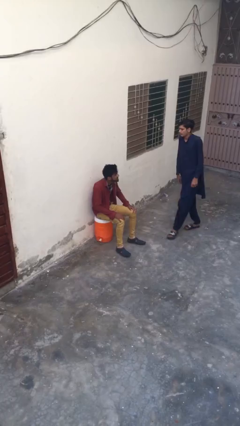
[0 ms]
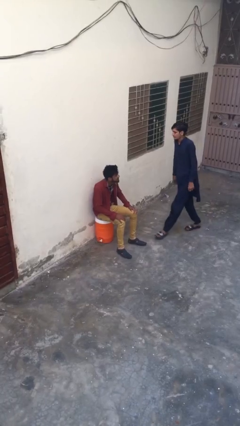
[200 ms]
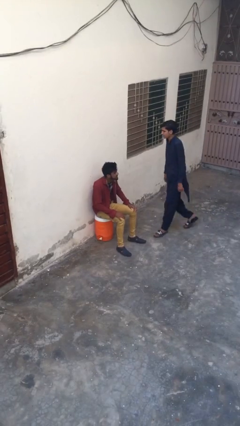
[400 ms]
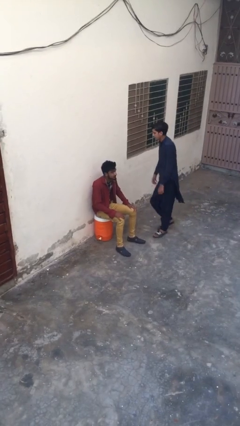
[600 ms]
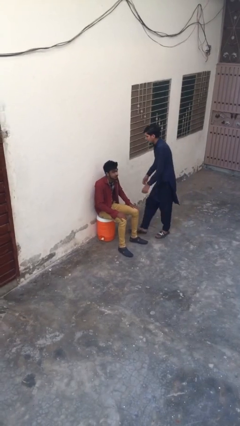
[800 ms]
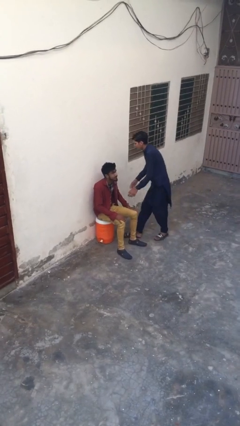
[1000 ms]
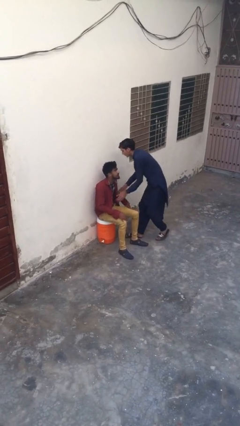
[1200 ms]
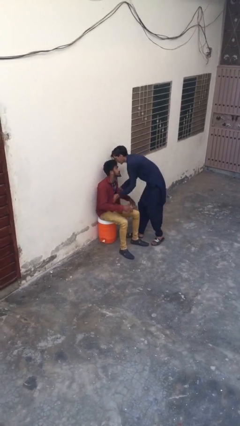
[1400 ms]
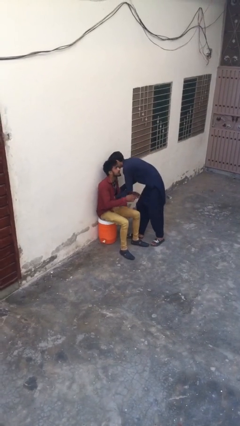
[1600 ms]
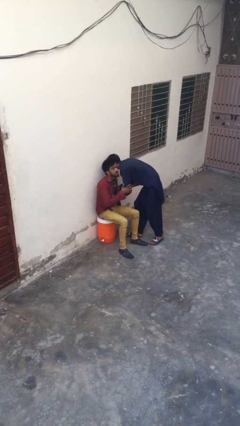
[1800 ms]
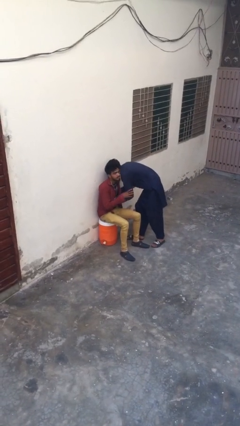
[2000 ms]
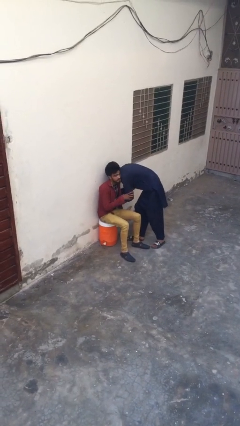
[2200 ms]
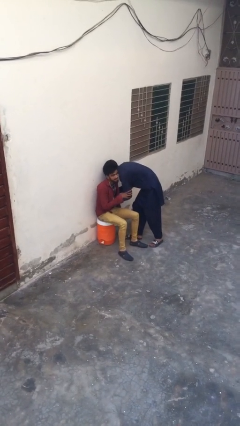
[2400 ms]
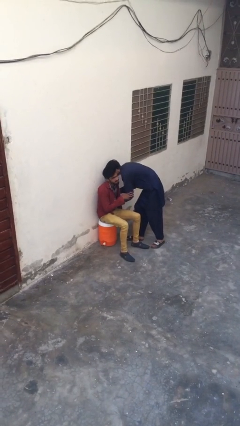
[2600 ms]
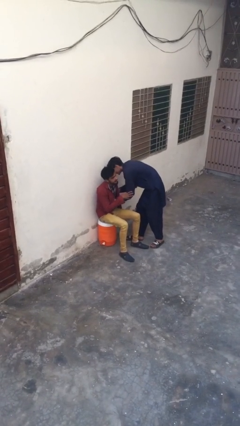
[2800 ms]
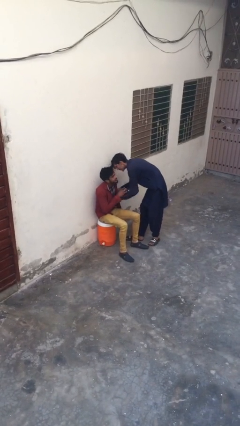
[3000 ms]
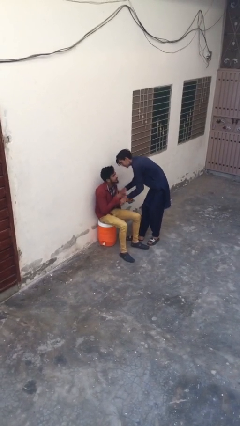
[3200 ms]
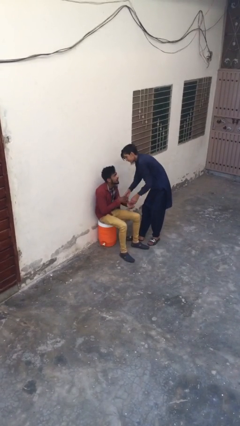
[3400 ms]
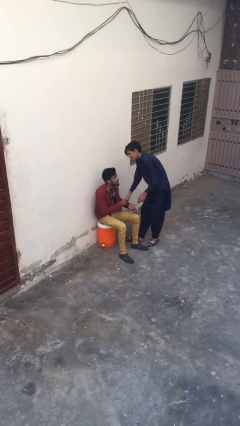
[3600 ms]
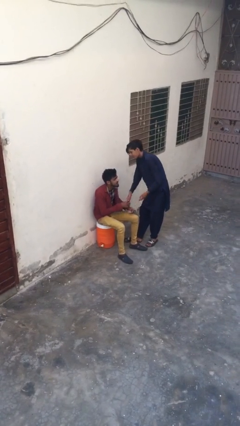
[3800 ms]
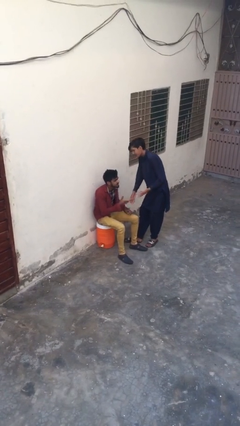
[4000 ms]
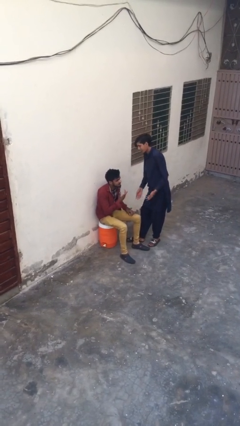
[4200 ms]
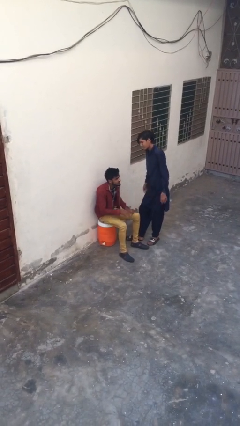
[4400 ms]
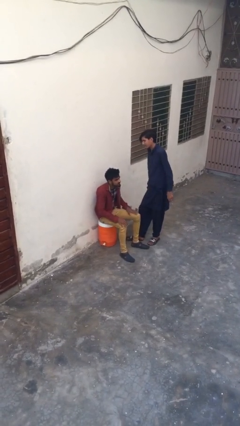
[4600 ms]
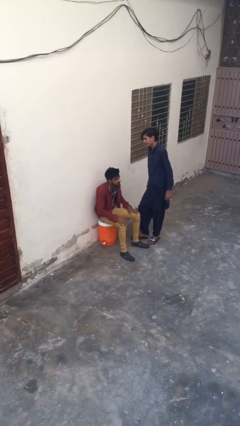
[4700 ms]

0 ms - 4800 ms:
person embraces person

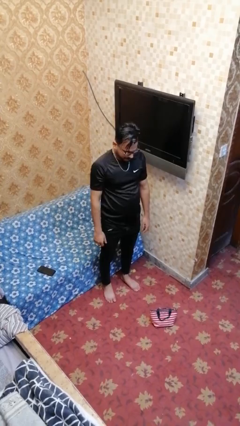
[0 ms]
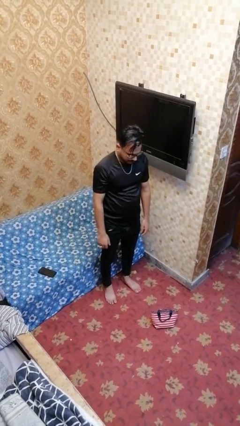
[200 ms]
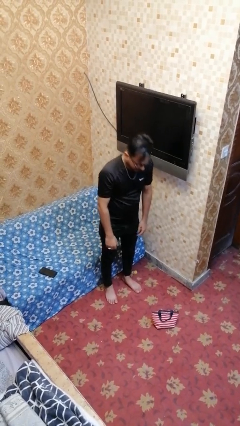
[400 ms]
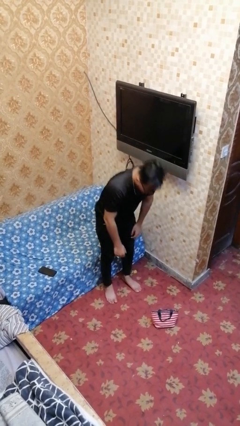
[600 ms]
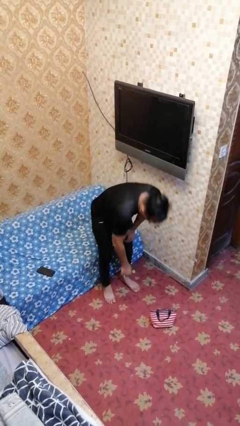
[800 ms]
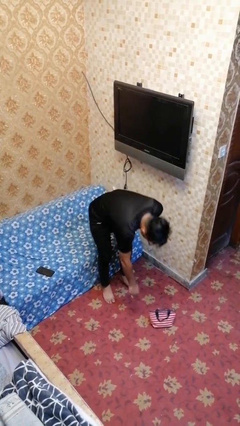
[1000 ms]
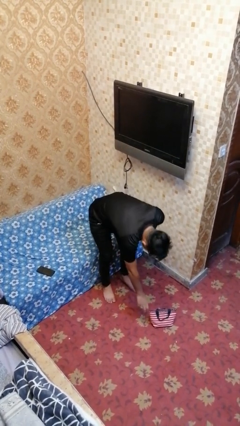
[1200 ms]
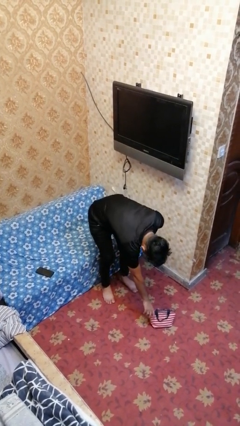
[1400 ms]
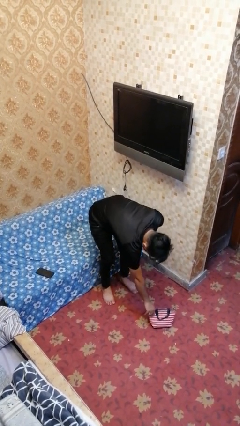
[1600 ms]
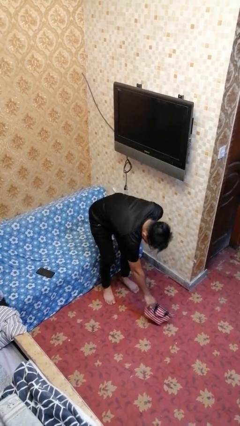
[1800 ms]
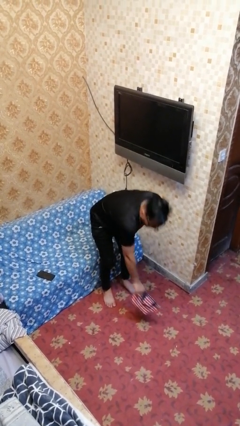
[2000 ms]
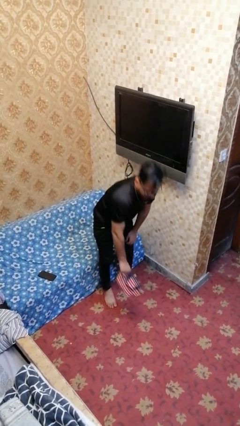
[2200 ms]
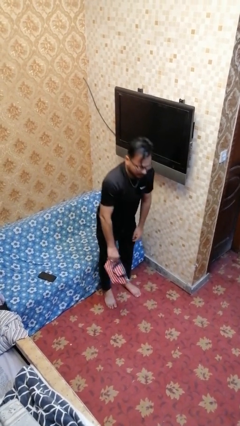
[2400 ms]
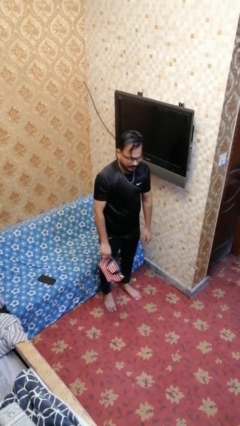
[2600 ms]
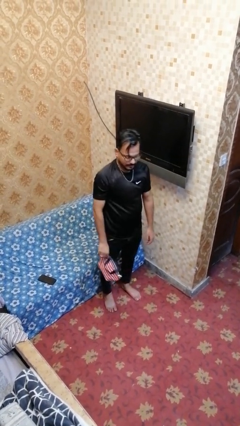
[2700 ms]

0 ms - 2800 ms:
person picks up object from floor

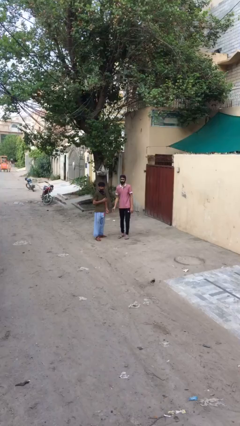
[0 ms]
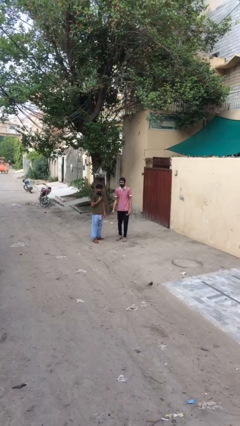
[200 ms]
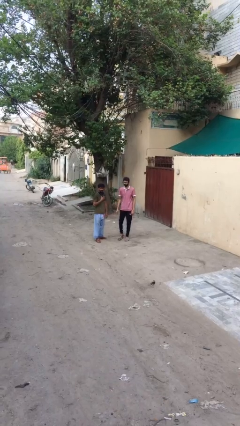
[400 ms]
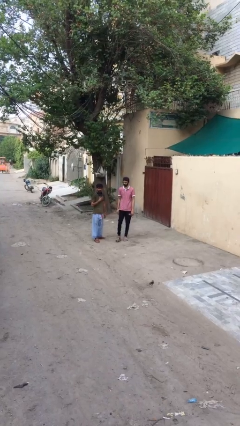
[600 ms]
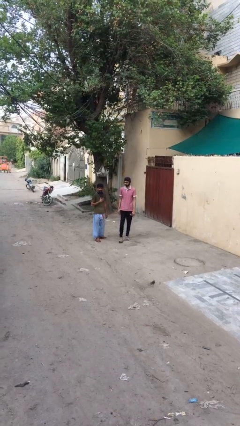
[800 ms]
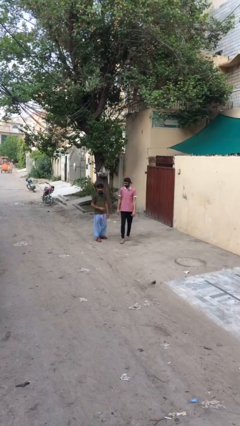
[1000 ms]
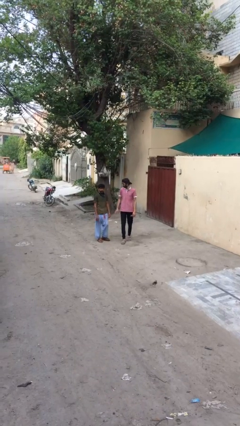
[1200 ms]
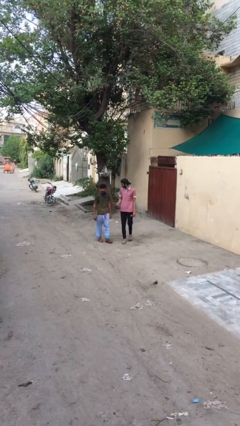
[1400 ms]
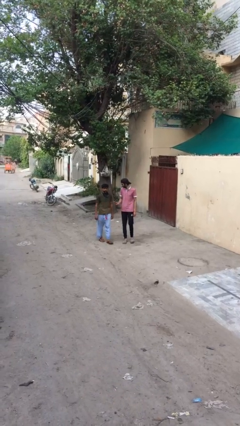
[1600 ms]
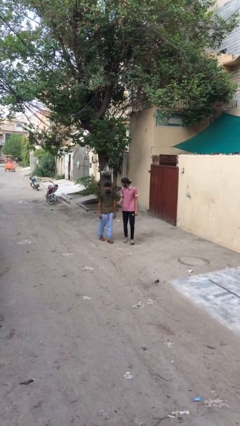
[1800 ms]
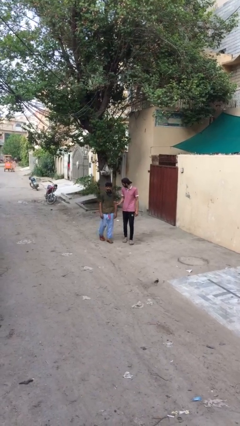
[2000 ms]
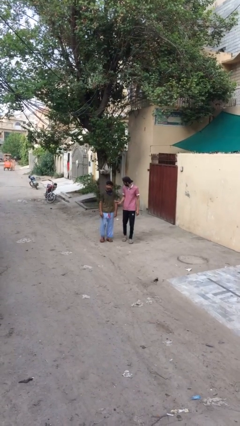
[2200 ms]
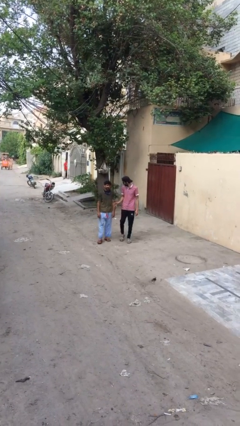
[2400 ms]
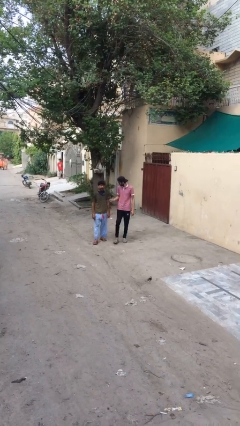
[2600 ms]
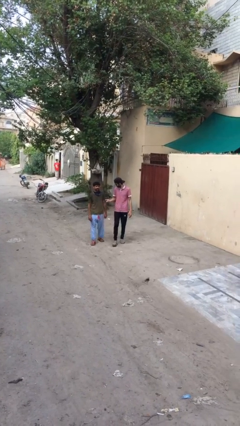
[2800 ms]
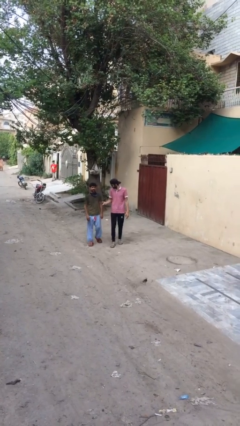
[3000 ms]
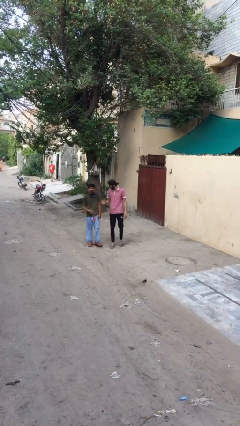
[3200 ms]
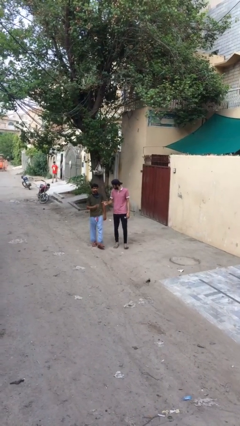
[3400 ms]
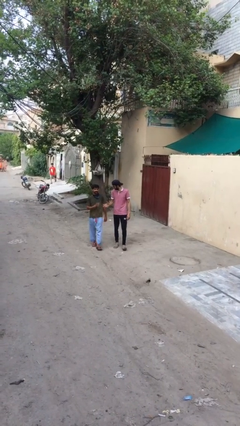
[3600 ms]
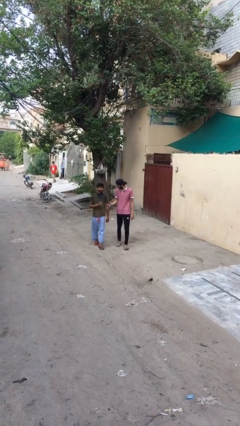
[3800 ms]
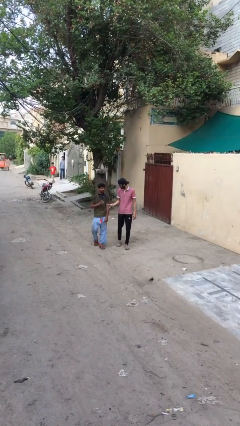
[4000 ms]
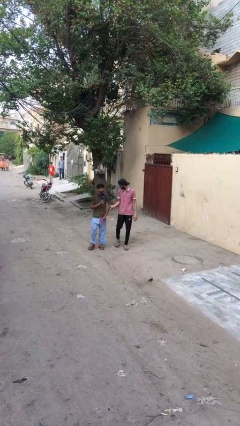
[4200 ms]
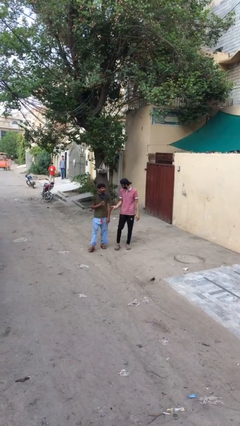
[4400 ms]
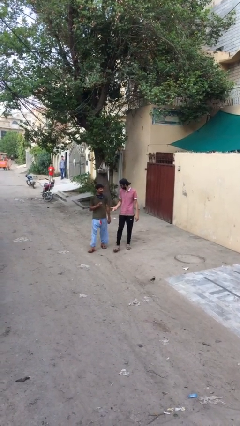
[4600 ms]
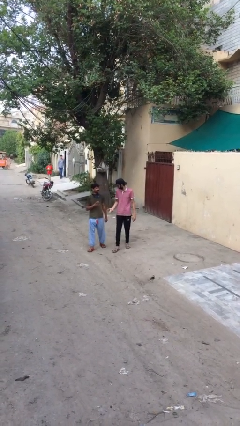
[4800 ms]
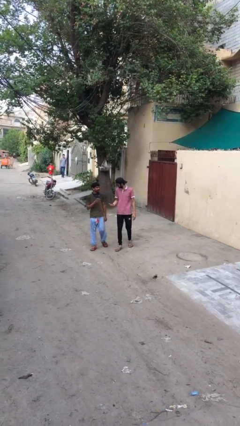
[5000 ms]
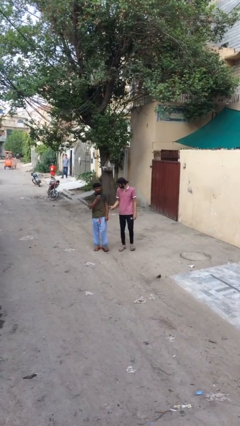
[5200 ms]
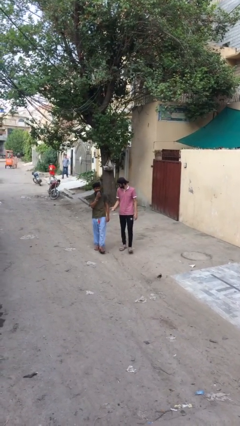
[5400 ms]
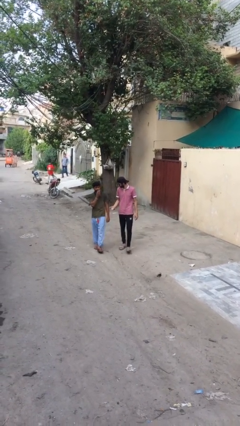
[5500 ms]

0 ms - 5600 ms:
person talks to person

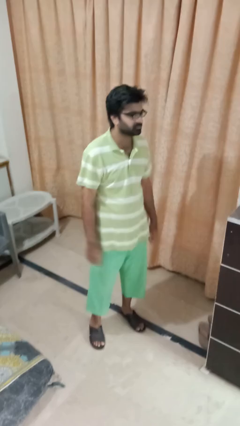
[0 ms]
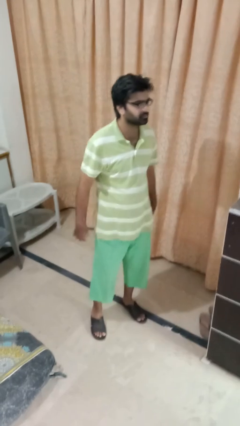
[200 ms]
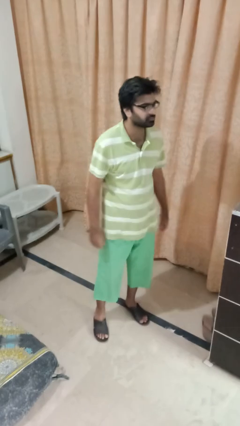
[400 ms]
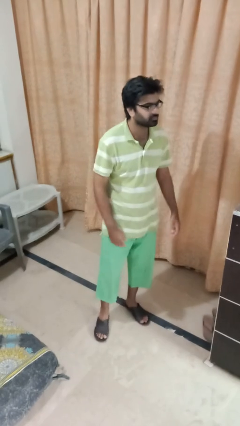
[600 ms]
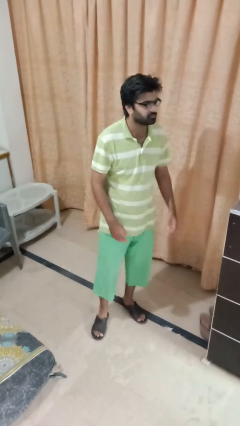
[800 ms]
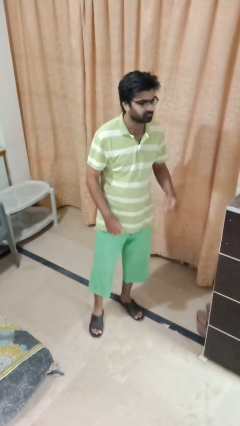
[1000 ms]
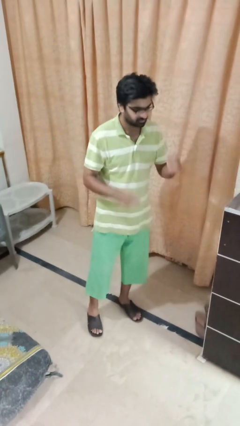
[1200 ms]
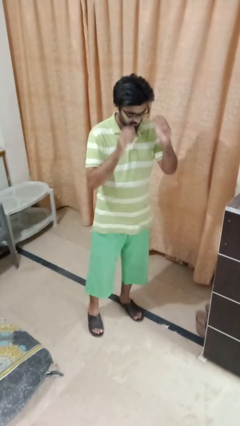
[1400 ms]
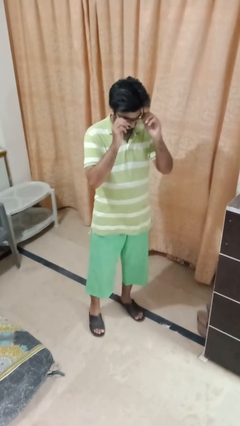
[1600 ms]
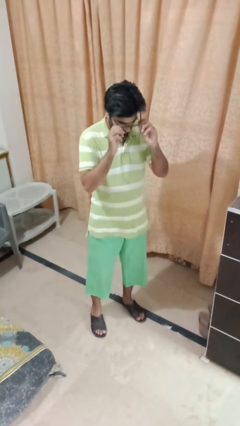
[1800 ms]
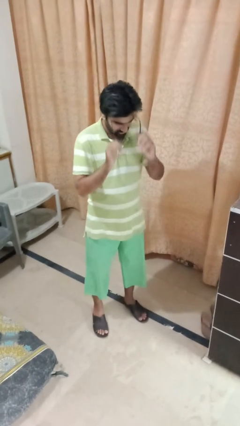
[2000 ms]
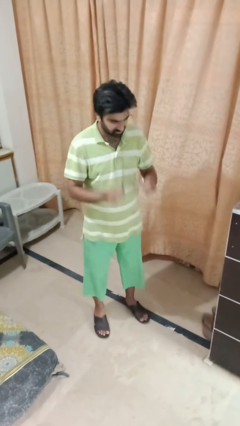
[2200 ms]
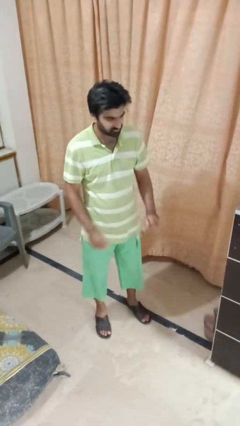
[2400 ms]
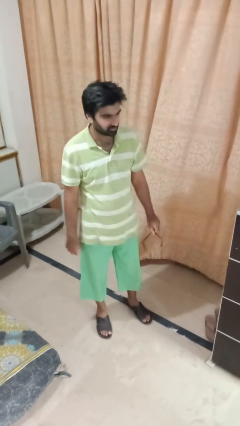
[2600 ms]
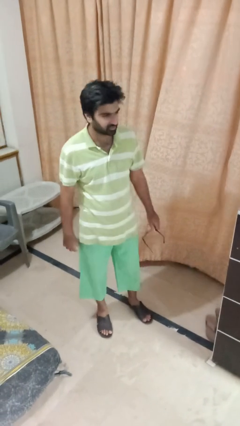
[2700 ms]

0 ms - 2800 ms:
person takes off glasses

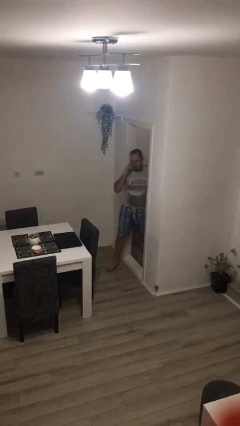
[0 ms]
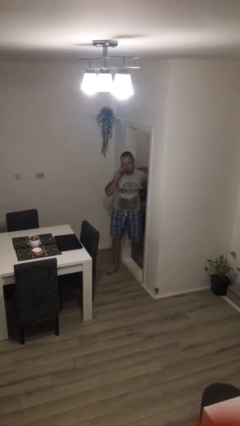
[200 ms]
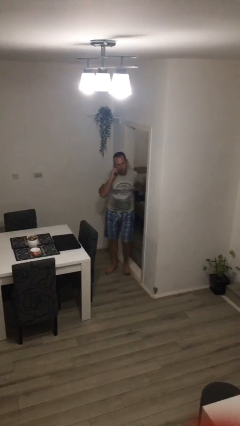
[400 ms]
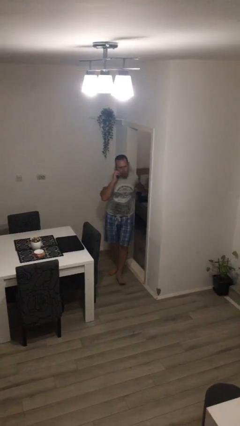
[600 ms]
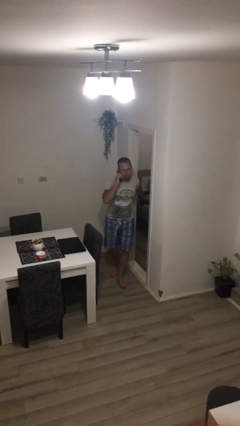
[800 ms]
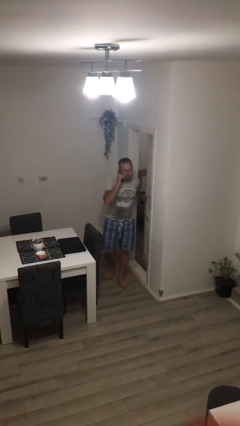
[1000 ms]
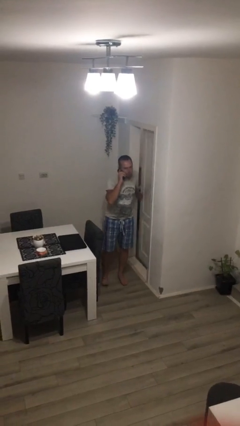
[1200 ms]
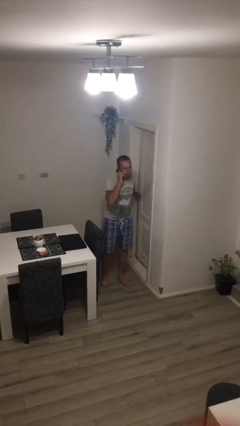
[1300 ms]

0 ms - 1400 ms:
person enters scene through structure

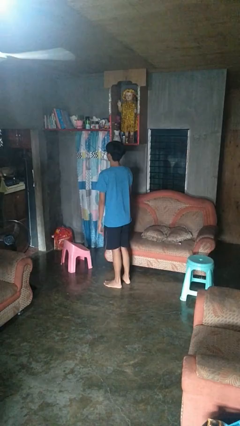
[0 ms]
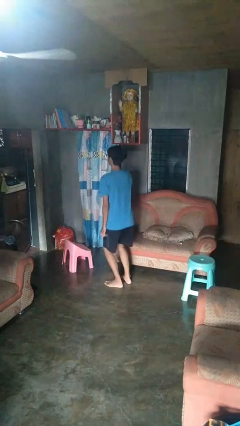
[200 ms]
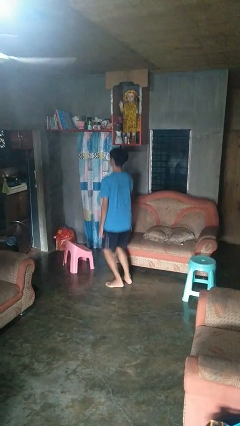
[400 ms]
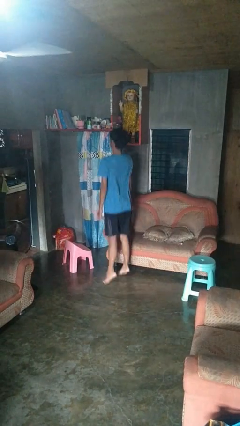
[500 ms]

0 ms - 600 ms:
person jumps
